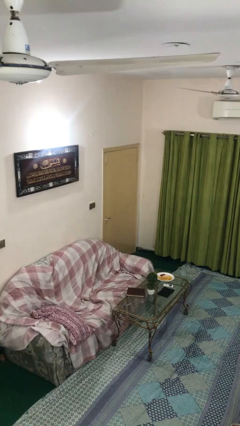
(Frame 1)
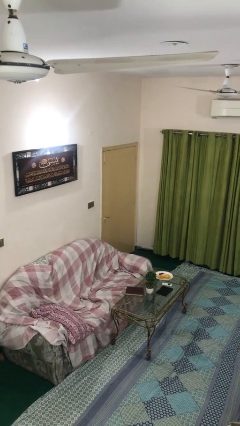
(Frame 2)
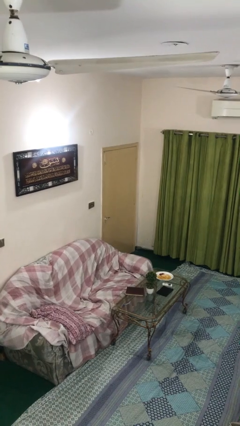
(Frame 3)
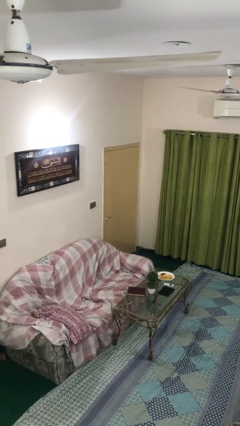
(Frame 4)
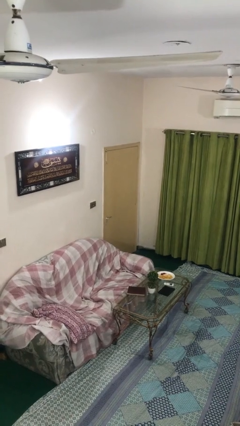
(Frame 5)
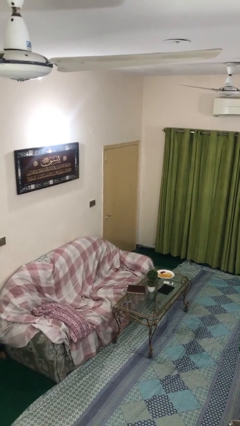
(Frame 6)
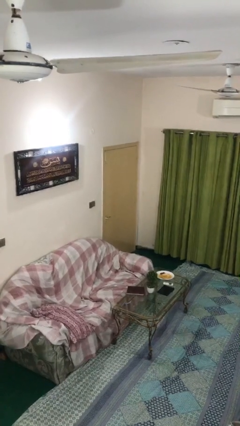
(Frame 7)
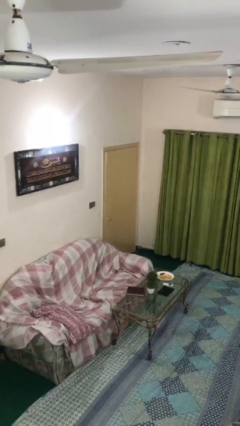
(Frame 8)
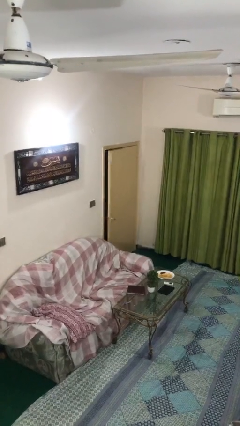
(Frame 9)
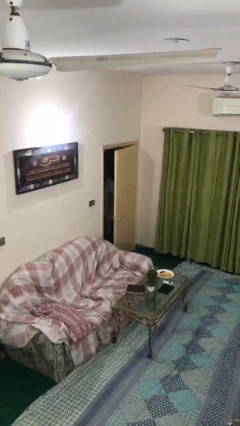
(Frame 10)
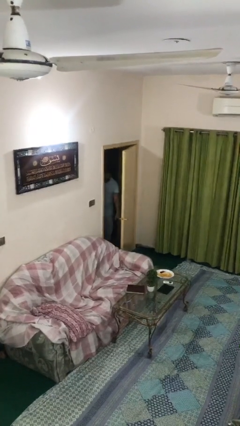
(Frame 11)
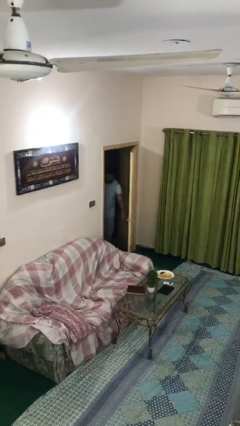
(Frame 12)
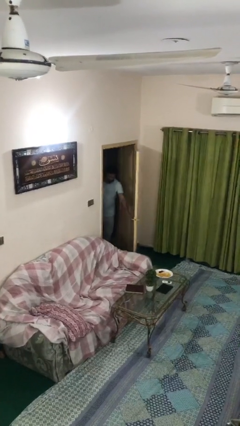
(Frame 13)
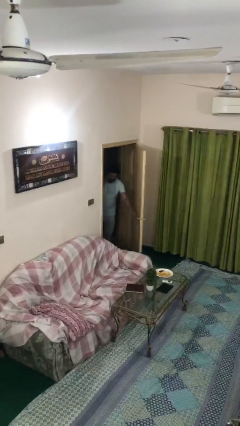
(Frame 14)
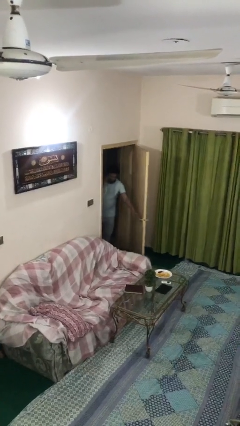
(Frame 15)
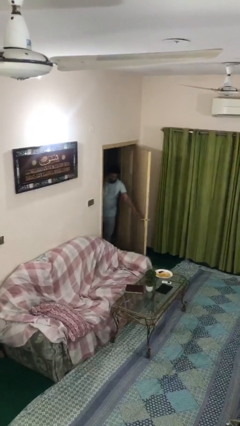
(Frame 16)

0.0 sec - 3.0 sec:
person opens facility door

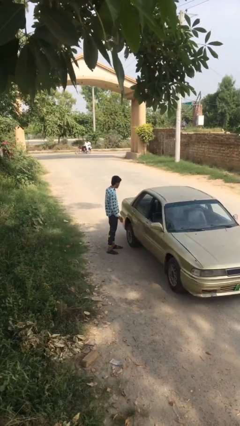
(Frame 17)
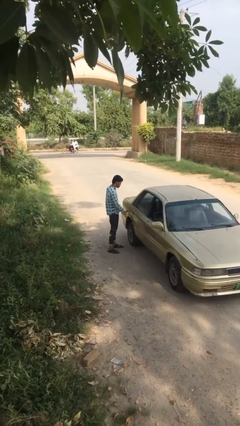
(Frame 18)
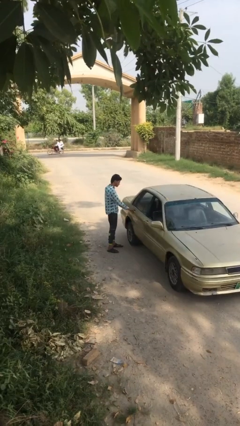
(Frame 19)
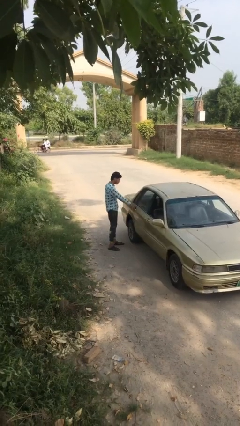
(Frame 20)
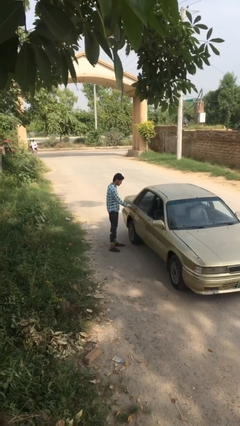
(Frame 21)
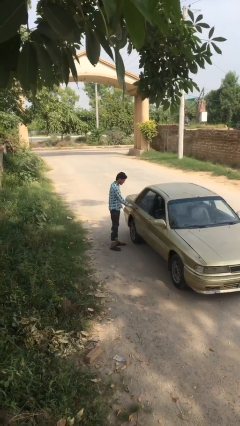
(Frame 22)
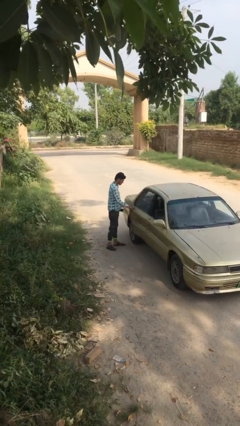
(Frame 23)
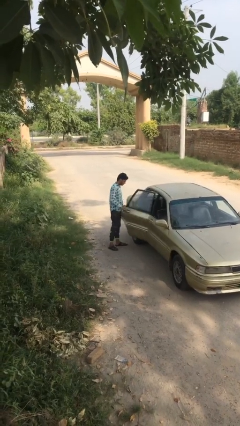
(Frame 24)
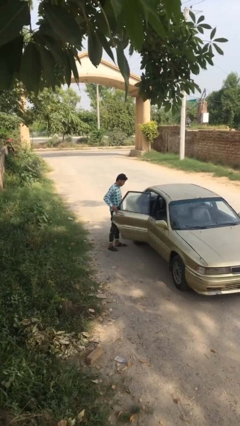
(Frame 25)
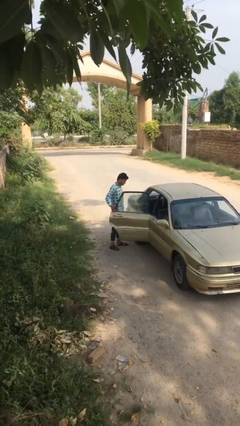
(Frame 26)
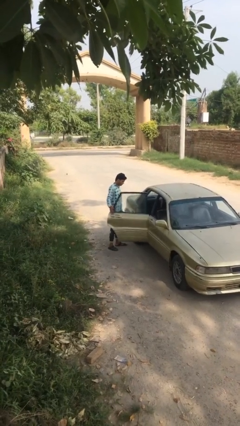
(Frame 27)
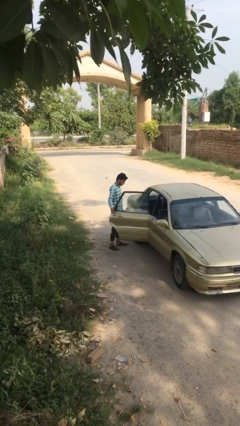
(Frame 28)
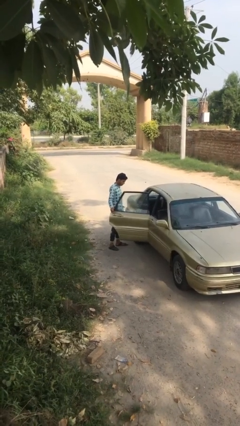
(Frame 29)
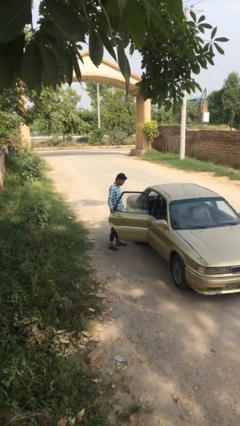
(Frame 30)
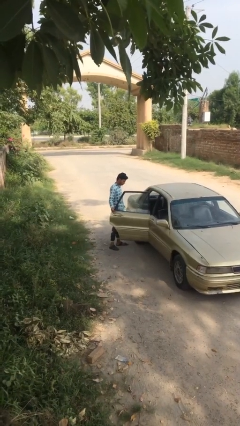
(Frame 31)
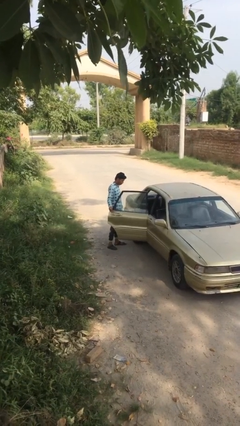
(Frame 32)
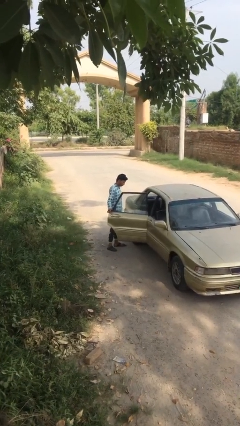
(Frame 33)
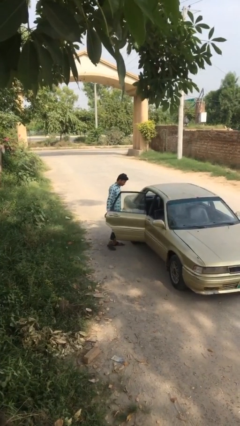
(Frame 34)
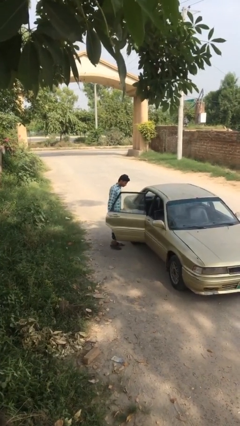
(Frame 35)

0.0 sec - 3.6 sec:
person opens car door

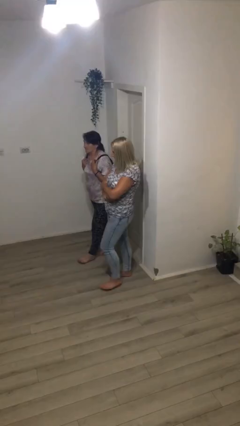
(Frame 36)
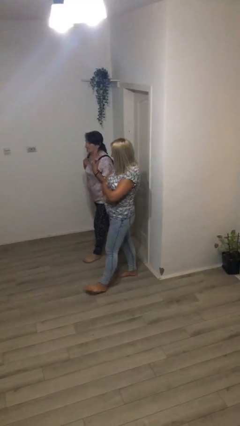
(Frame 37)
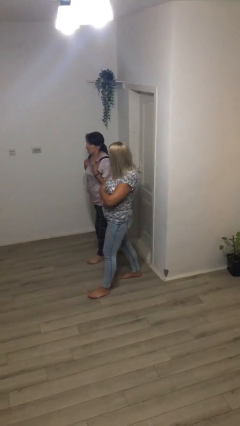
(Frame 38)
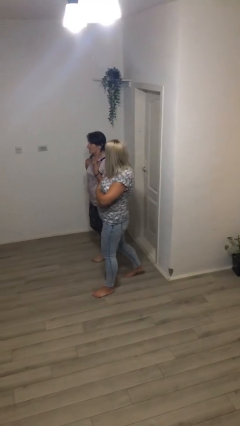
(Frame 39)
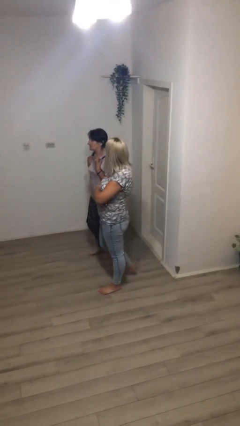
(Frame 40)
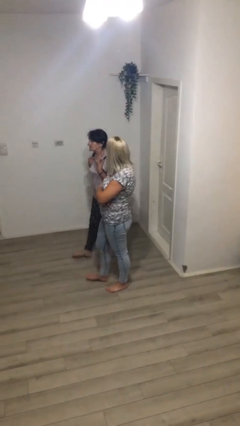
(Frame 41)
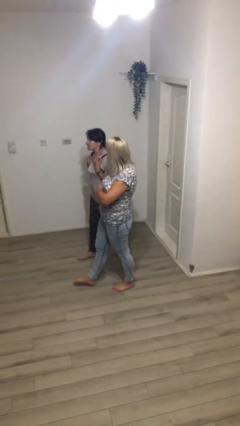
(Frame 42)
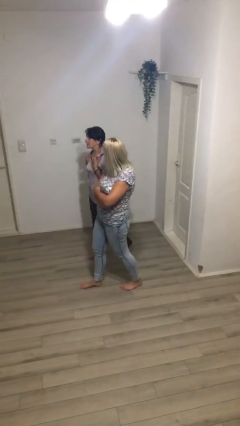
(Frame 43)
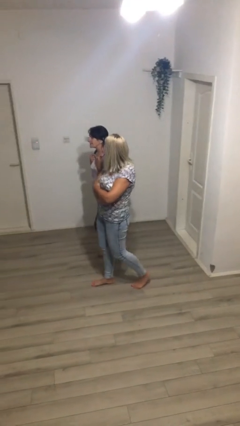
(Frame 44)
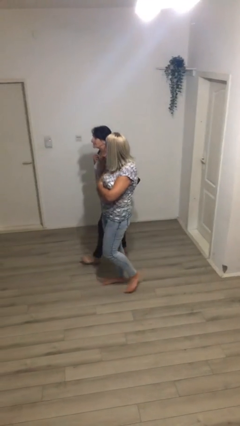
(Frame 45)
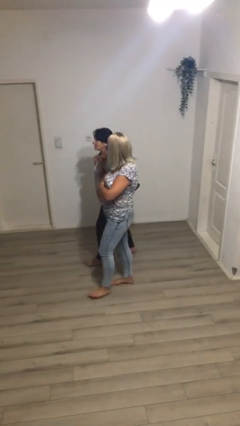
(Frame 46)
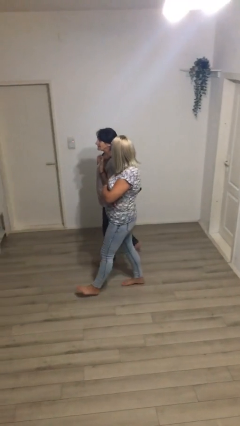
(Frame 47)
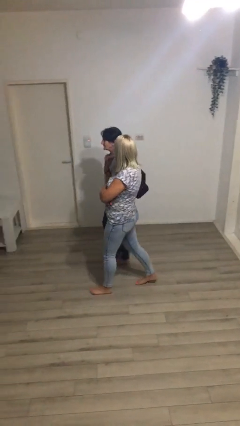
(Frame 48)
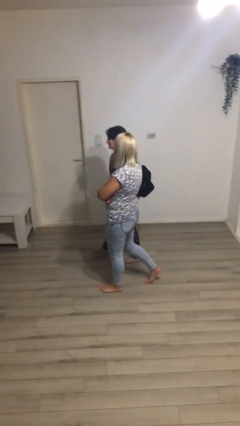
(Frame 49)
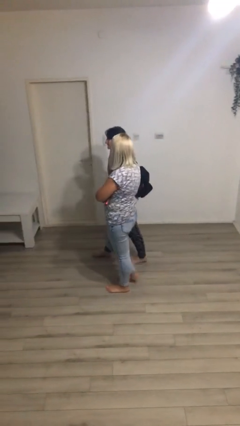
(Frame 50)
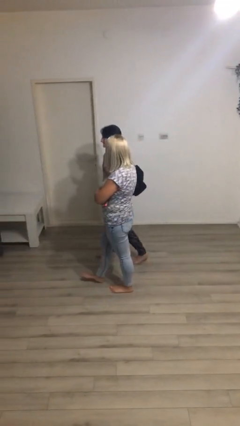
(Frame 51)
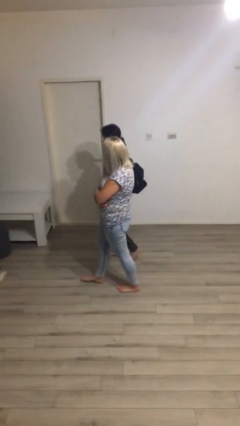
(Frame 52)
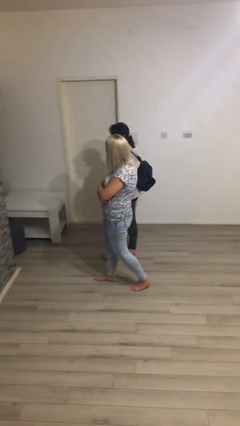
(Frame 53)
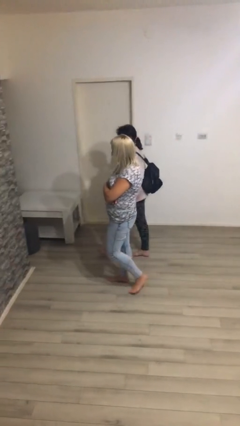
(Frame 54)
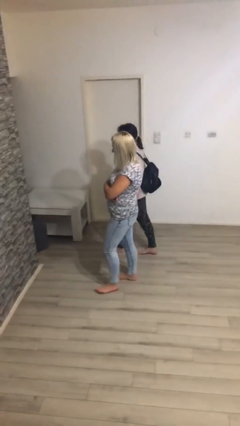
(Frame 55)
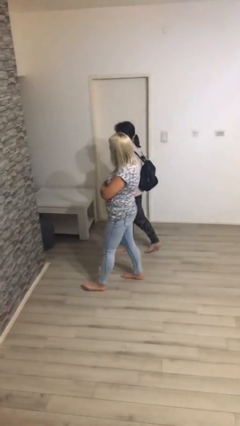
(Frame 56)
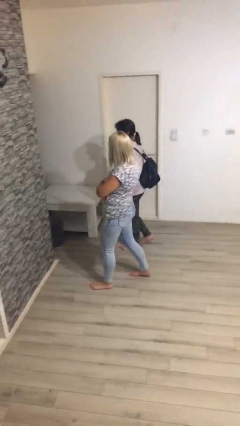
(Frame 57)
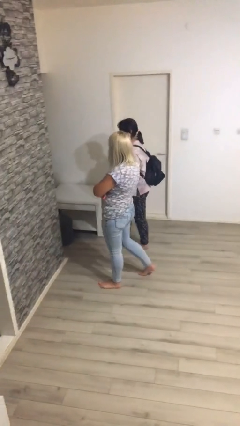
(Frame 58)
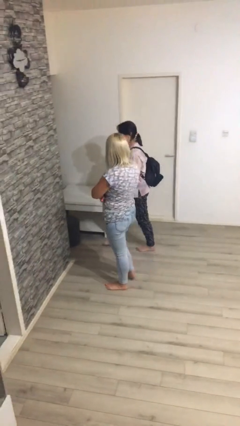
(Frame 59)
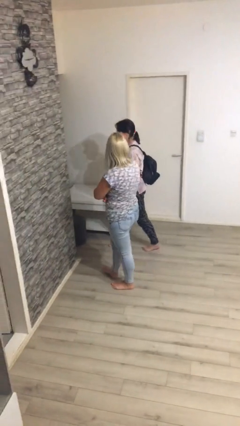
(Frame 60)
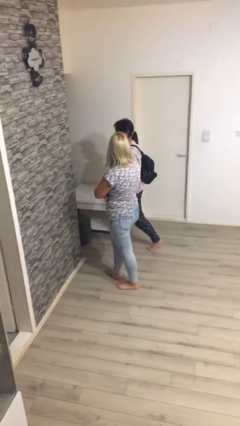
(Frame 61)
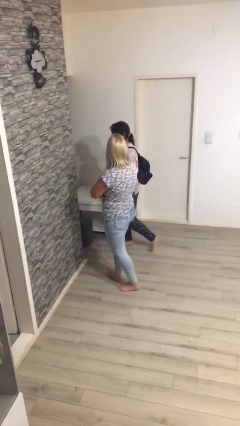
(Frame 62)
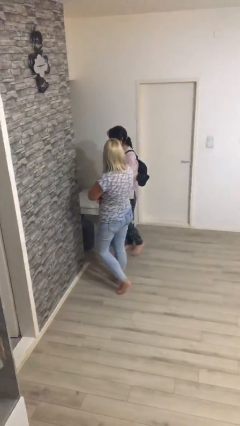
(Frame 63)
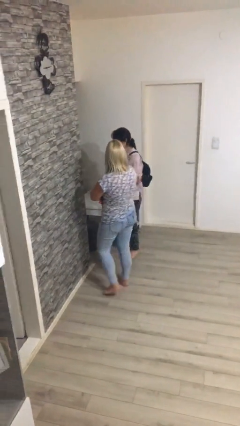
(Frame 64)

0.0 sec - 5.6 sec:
person talks to person

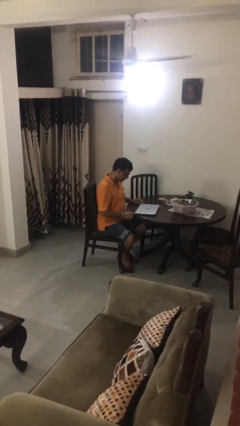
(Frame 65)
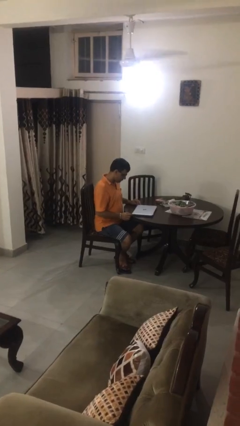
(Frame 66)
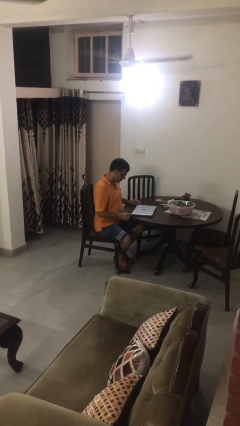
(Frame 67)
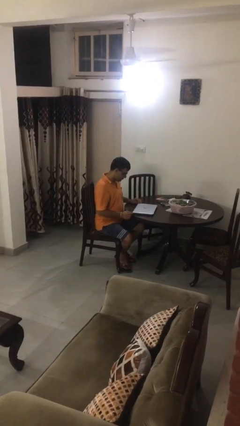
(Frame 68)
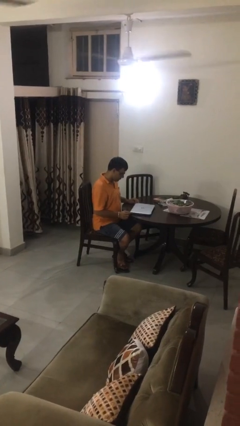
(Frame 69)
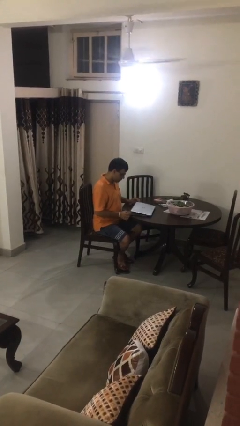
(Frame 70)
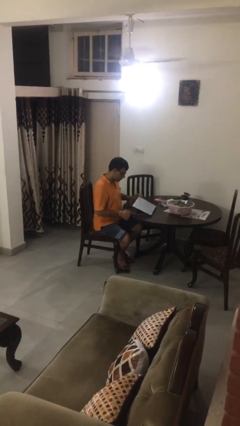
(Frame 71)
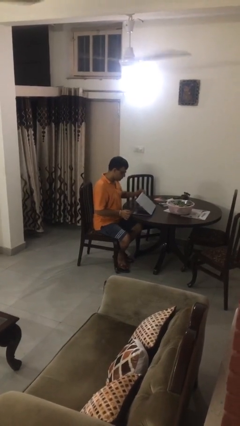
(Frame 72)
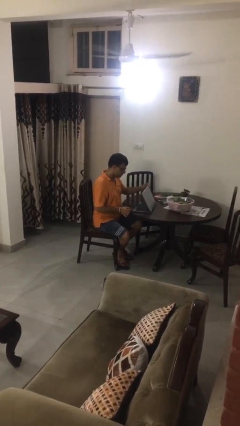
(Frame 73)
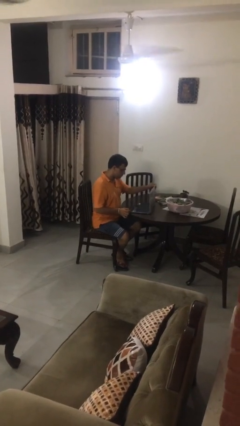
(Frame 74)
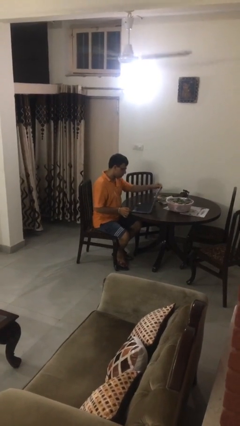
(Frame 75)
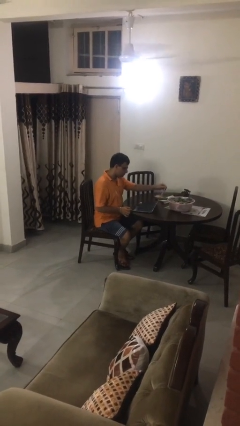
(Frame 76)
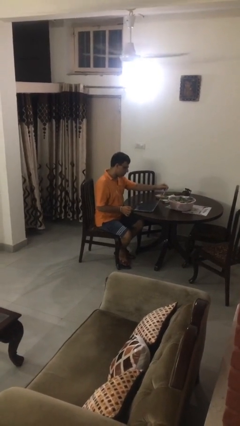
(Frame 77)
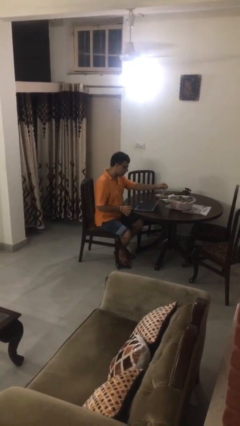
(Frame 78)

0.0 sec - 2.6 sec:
person opens laptop

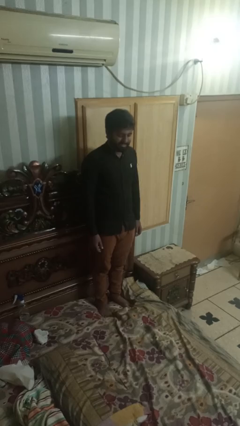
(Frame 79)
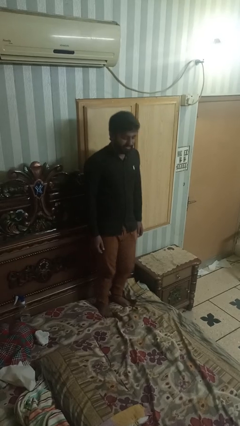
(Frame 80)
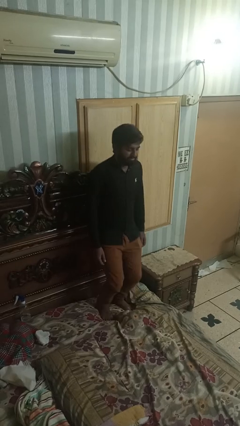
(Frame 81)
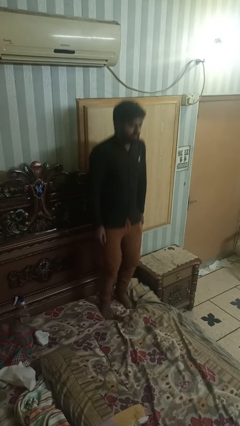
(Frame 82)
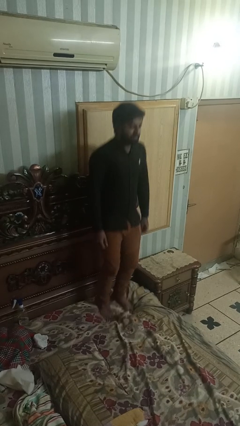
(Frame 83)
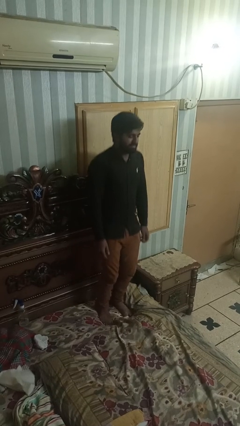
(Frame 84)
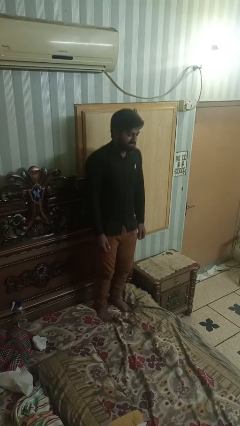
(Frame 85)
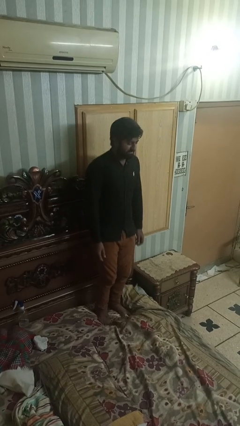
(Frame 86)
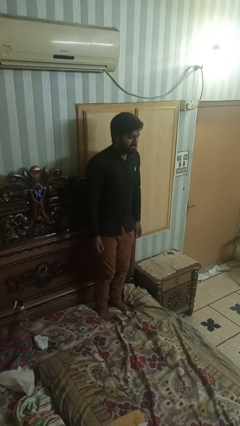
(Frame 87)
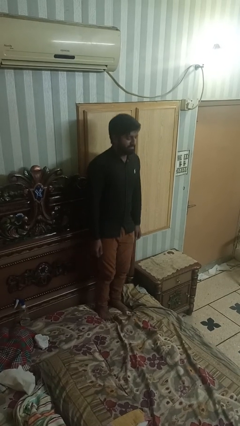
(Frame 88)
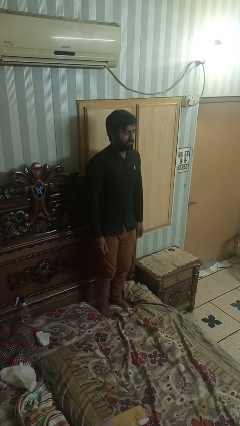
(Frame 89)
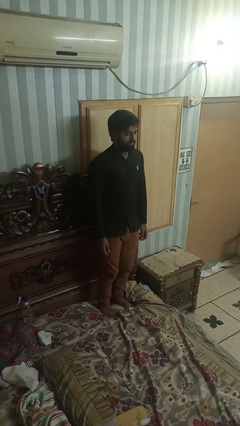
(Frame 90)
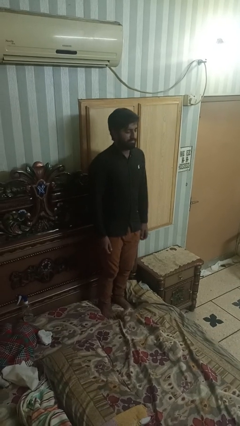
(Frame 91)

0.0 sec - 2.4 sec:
person jumps on bed

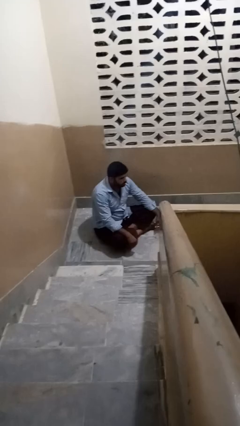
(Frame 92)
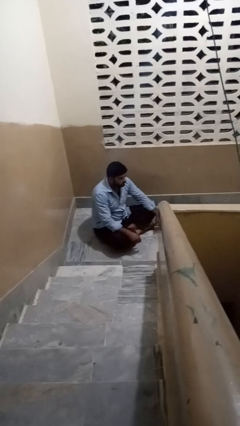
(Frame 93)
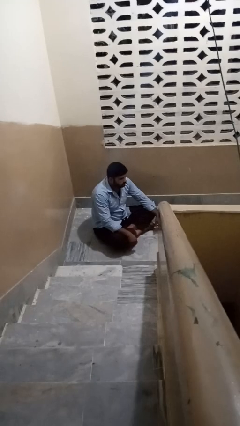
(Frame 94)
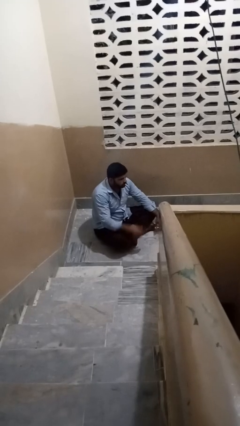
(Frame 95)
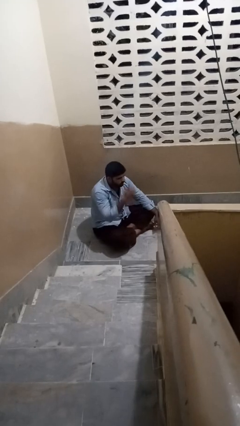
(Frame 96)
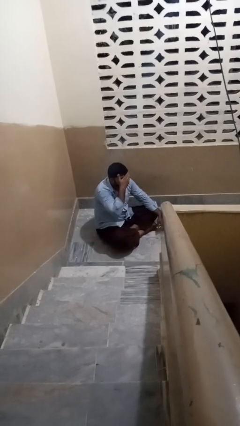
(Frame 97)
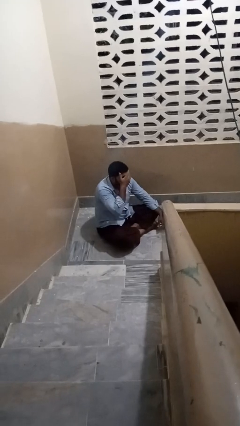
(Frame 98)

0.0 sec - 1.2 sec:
person covers face with hands
